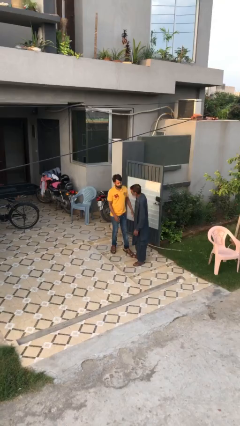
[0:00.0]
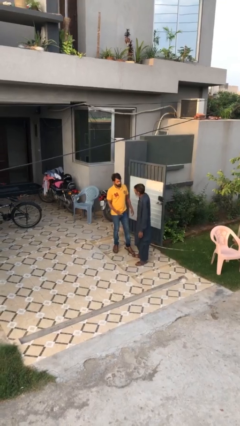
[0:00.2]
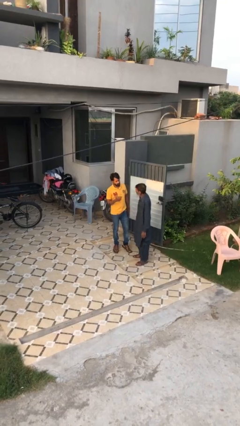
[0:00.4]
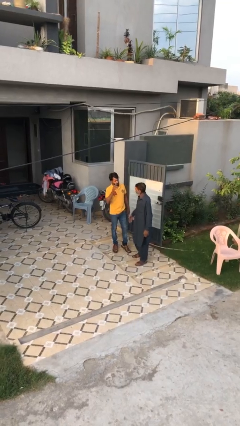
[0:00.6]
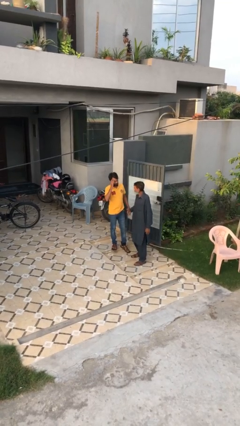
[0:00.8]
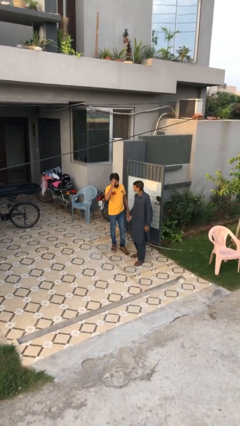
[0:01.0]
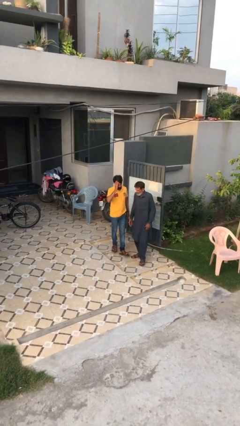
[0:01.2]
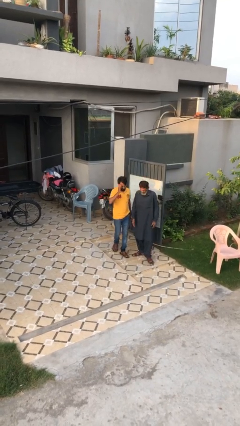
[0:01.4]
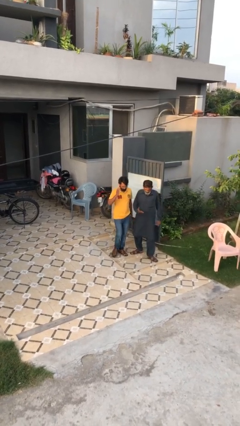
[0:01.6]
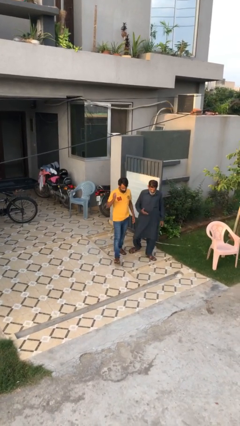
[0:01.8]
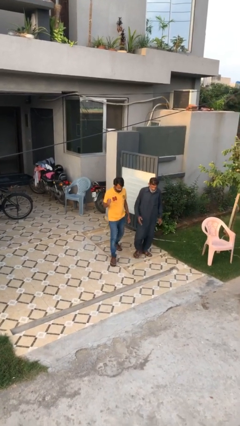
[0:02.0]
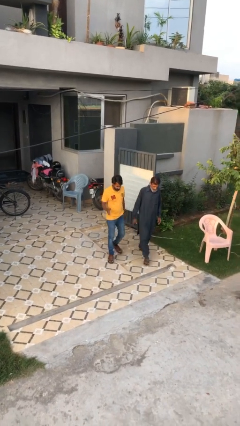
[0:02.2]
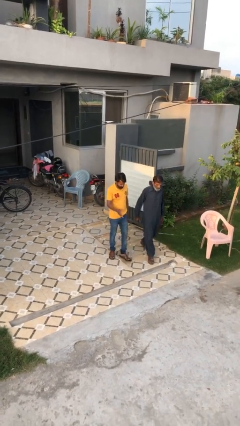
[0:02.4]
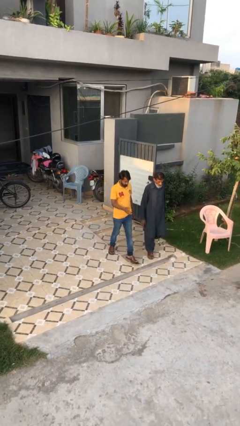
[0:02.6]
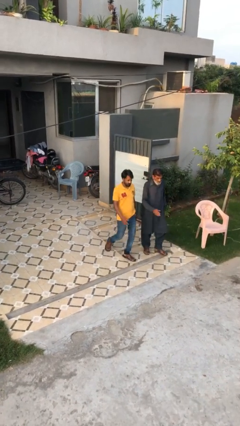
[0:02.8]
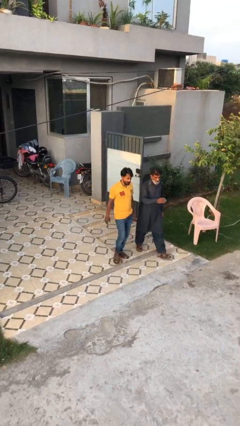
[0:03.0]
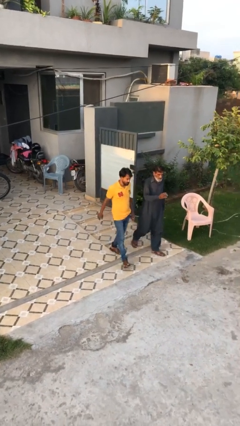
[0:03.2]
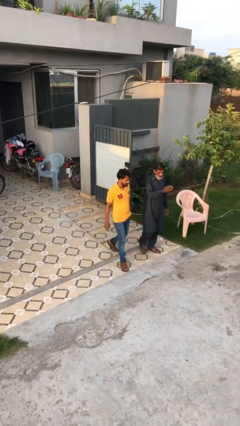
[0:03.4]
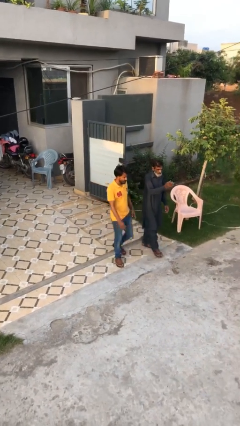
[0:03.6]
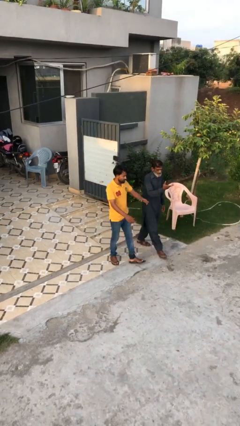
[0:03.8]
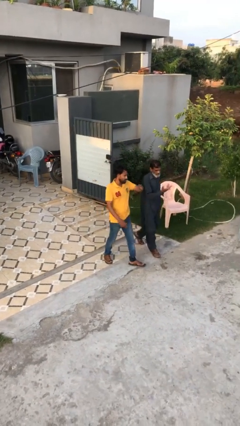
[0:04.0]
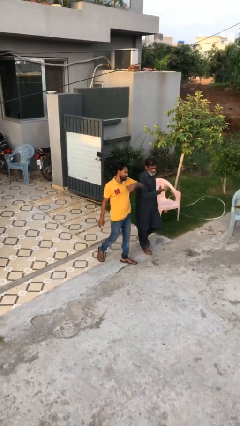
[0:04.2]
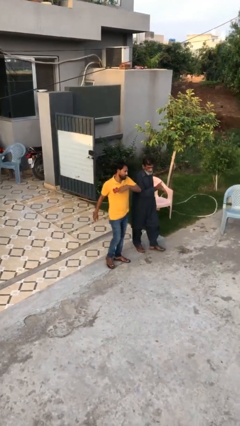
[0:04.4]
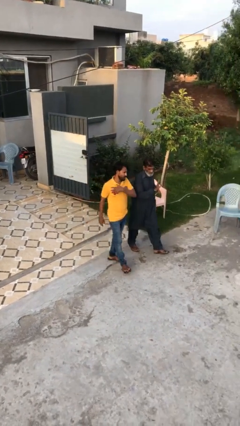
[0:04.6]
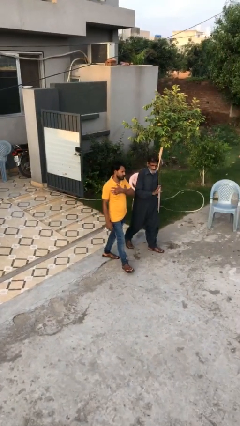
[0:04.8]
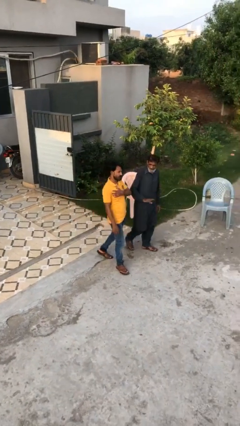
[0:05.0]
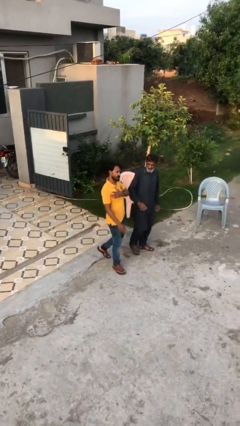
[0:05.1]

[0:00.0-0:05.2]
person talks to person

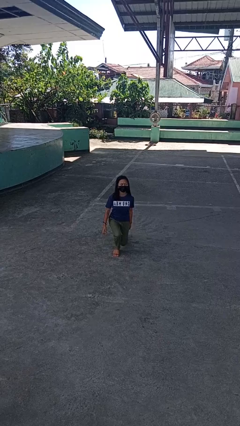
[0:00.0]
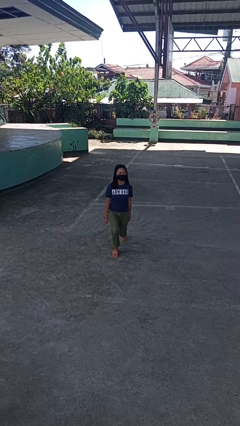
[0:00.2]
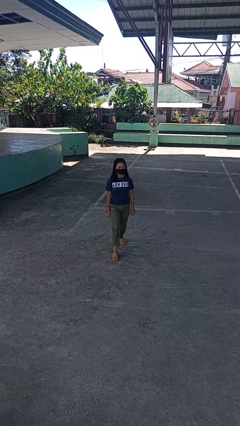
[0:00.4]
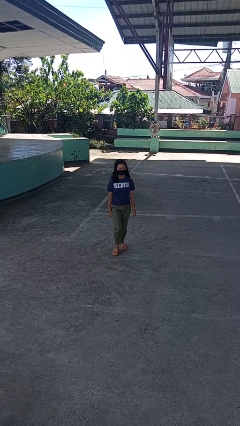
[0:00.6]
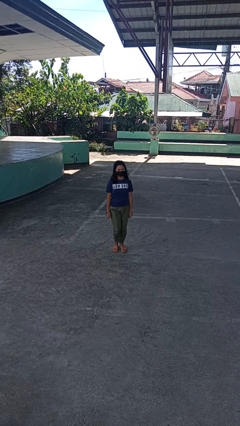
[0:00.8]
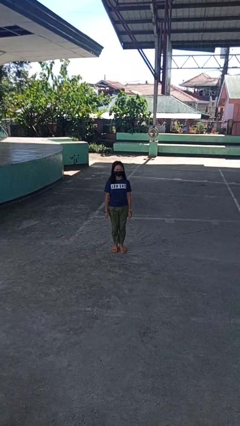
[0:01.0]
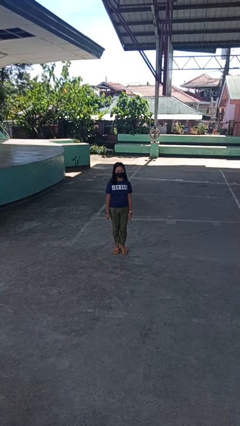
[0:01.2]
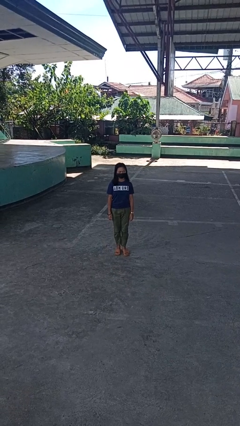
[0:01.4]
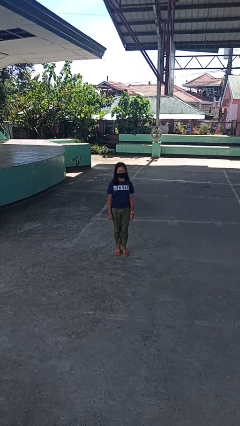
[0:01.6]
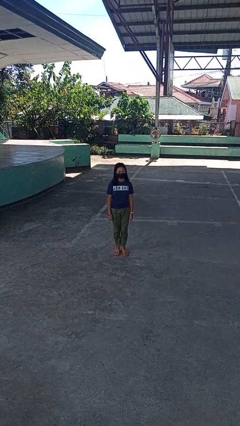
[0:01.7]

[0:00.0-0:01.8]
person stands up from floor

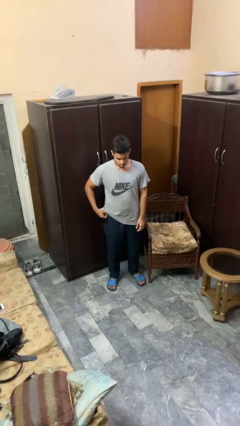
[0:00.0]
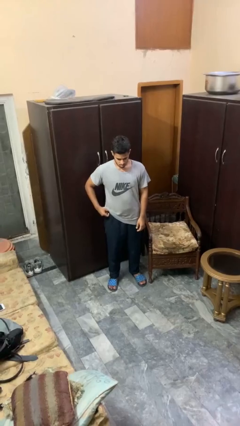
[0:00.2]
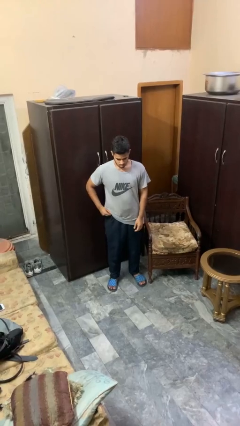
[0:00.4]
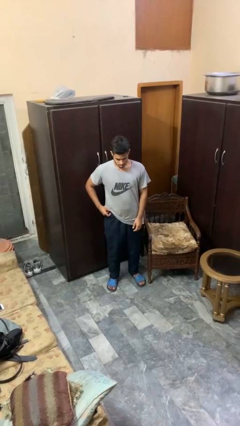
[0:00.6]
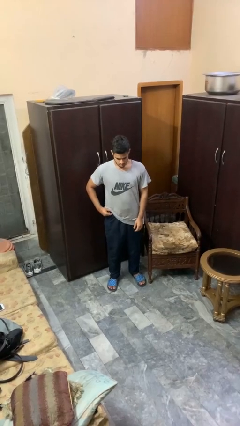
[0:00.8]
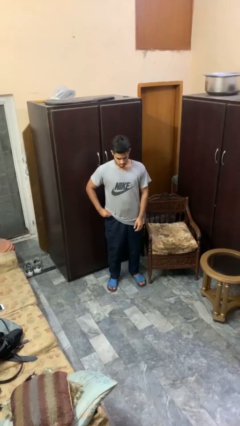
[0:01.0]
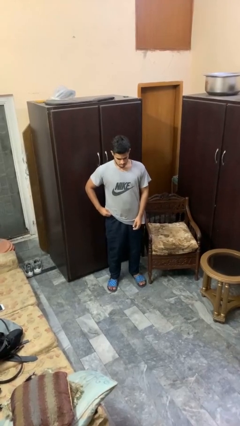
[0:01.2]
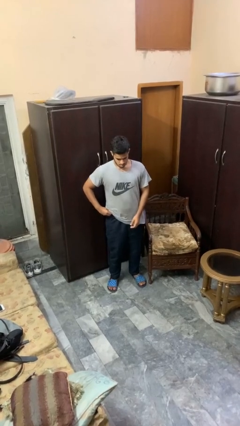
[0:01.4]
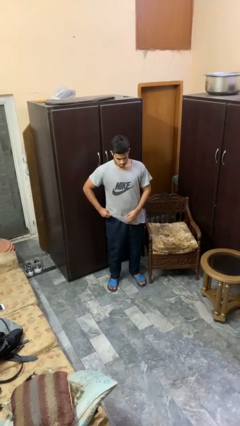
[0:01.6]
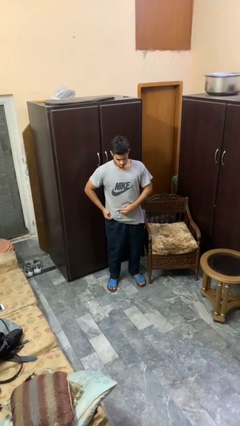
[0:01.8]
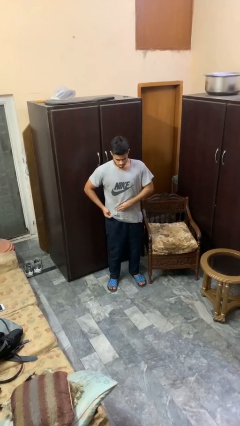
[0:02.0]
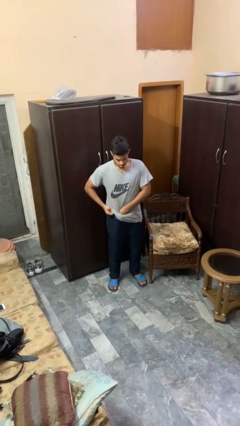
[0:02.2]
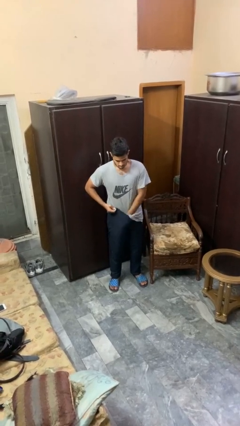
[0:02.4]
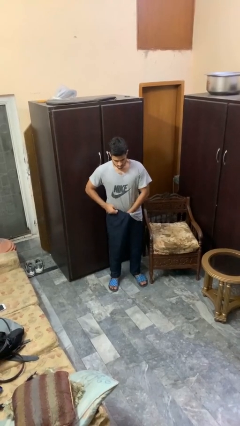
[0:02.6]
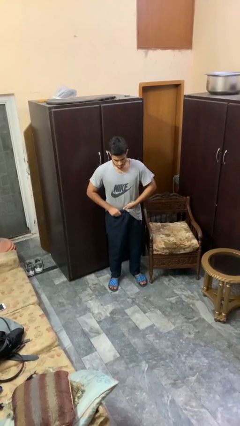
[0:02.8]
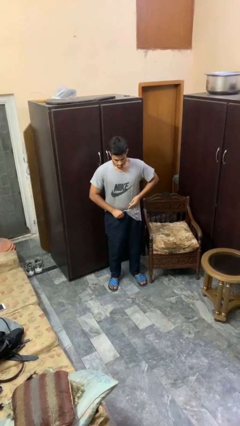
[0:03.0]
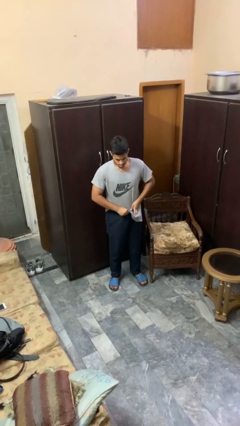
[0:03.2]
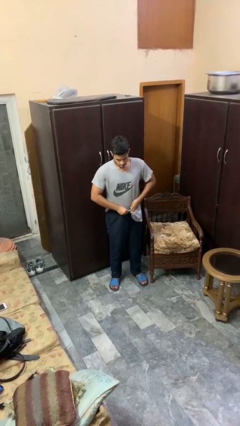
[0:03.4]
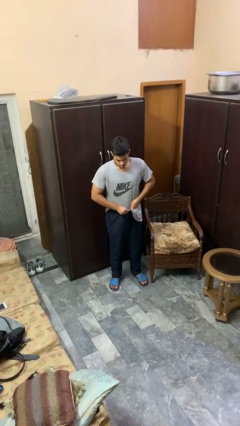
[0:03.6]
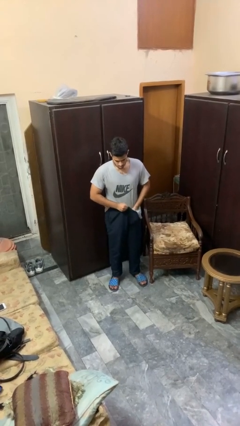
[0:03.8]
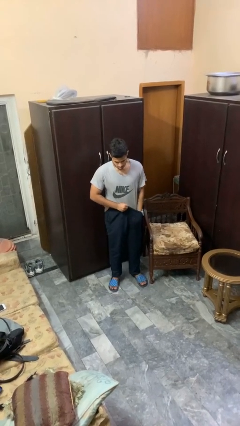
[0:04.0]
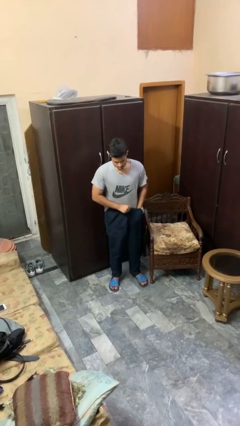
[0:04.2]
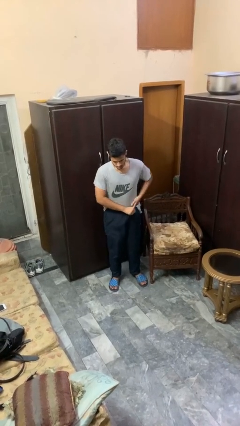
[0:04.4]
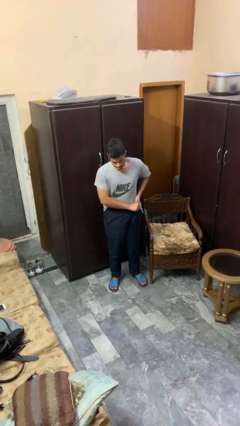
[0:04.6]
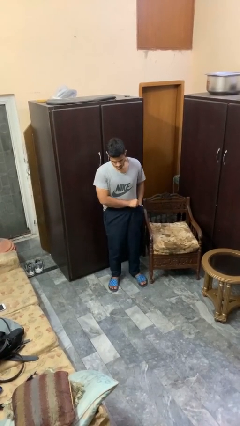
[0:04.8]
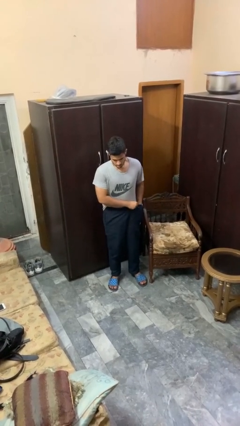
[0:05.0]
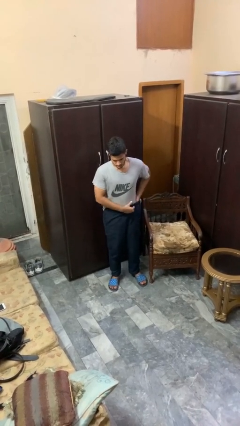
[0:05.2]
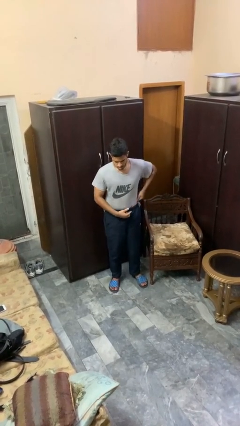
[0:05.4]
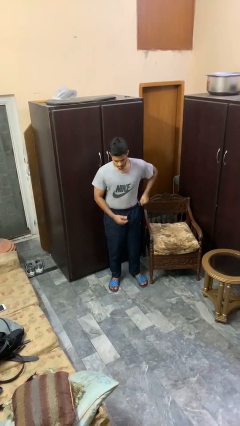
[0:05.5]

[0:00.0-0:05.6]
person tucks in shirt

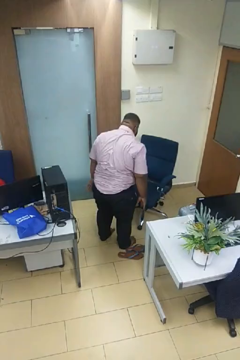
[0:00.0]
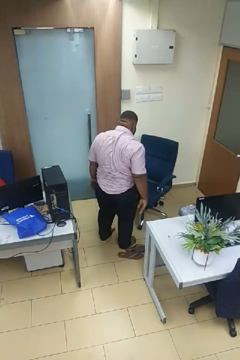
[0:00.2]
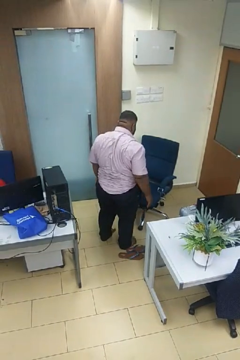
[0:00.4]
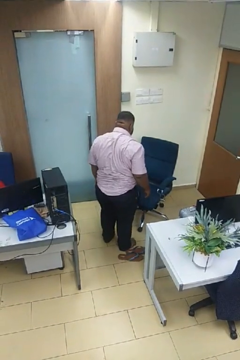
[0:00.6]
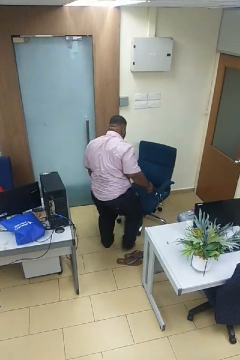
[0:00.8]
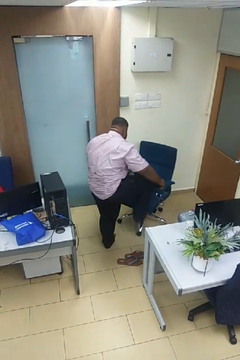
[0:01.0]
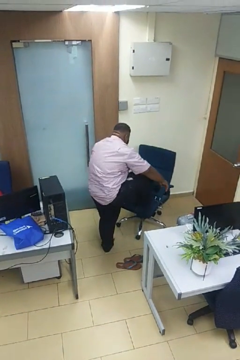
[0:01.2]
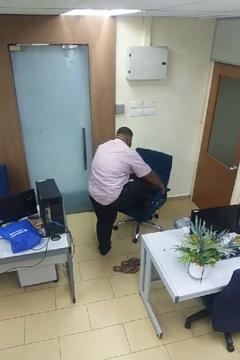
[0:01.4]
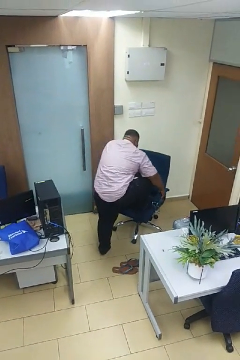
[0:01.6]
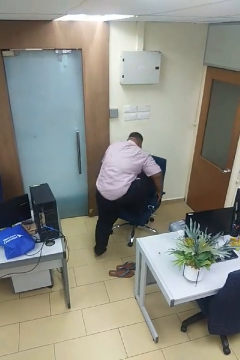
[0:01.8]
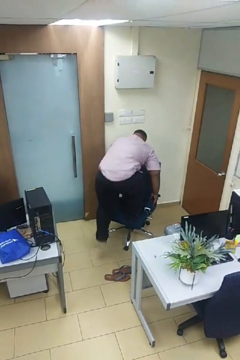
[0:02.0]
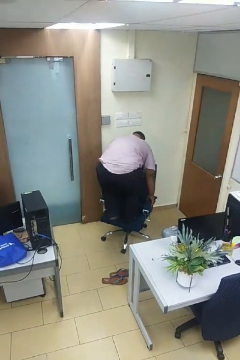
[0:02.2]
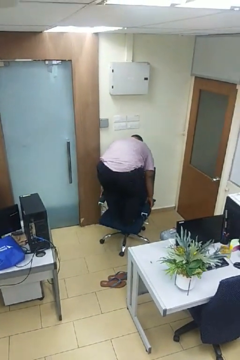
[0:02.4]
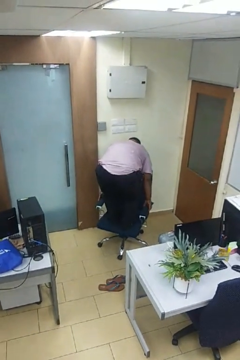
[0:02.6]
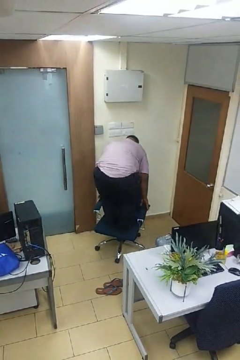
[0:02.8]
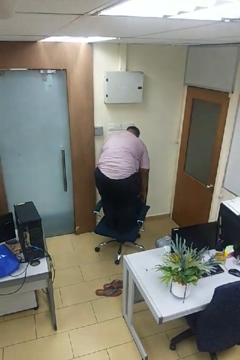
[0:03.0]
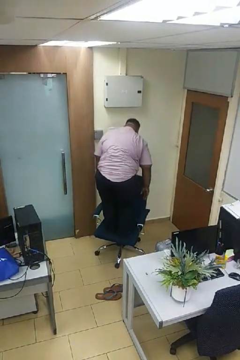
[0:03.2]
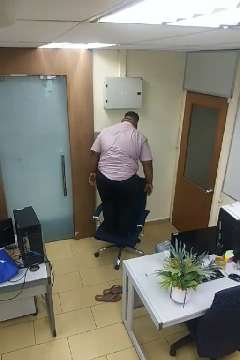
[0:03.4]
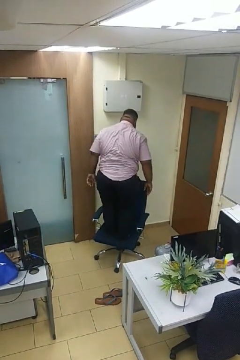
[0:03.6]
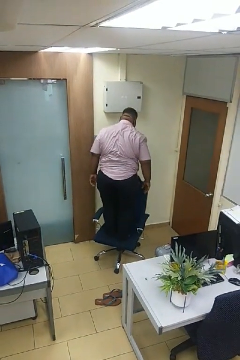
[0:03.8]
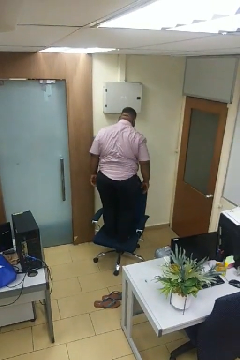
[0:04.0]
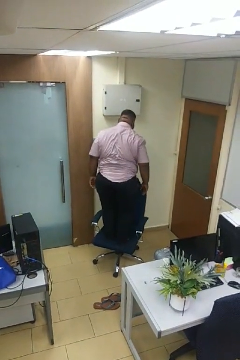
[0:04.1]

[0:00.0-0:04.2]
person climbs on chair

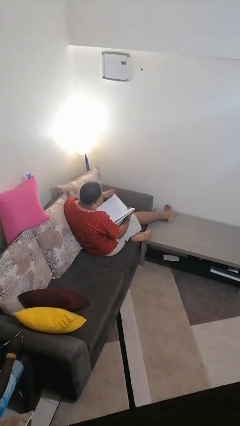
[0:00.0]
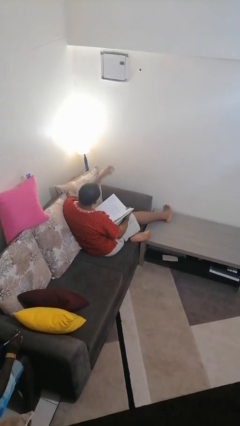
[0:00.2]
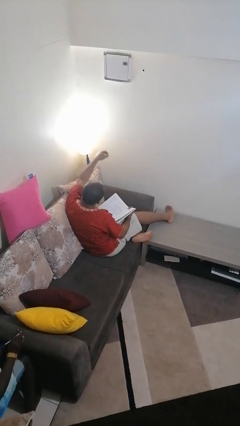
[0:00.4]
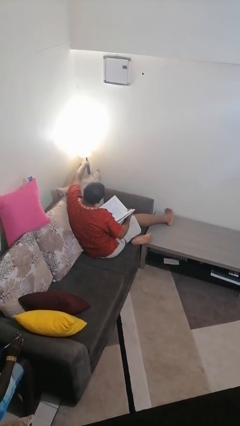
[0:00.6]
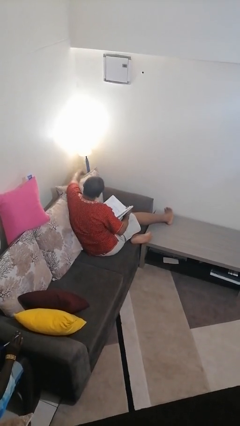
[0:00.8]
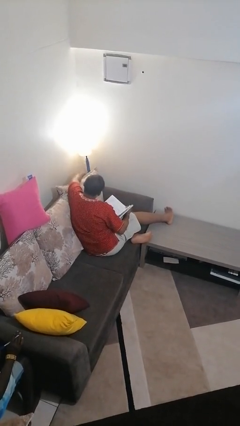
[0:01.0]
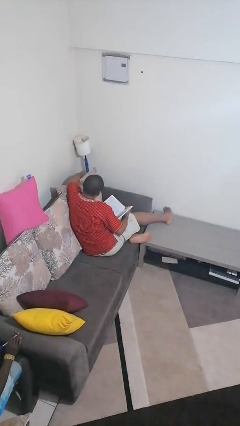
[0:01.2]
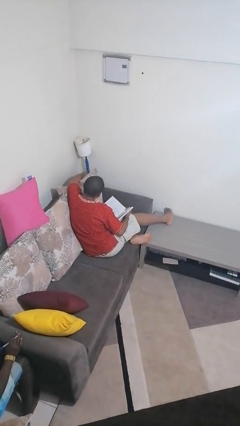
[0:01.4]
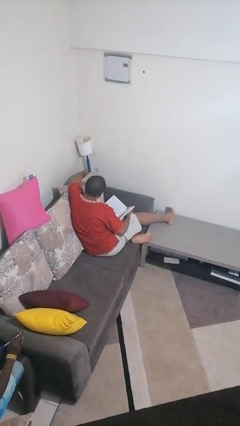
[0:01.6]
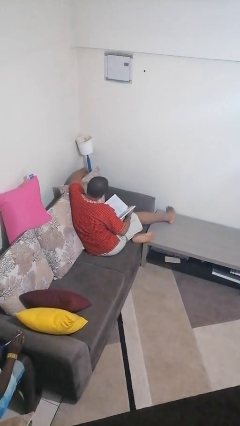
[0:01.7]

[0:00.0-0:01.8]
person turns off lamp
